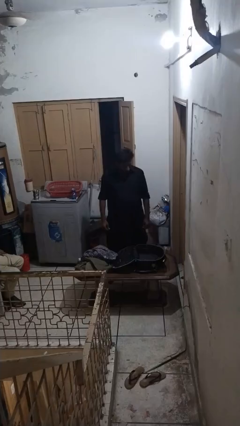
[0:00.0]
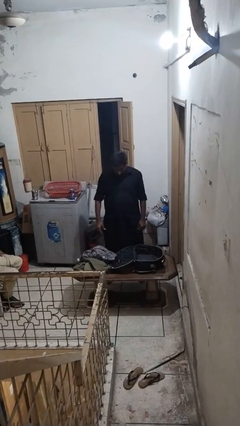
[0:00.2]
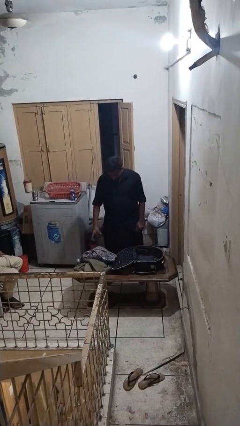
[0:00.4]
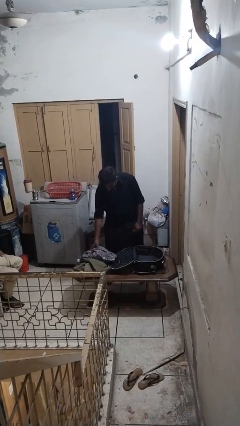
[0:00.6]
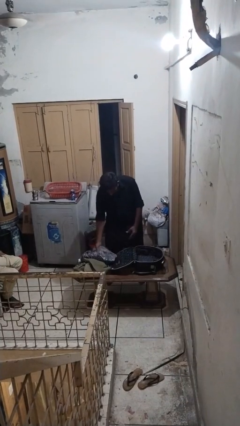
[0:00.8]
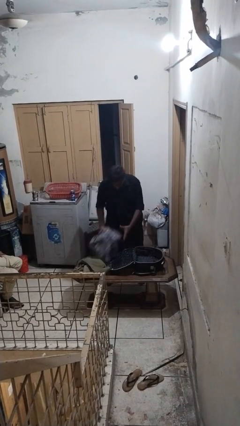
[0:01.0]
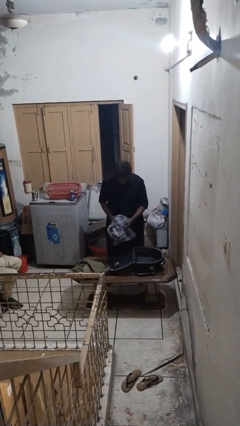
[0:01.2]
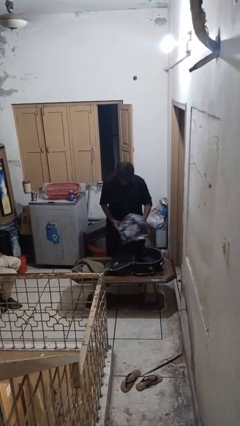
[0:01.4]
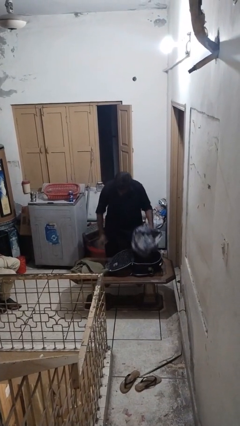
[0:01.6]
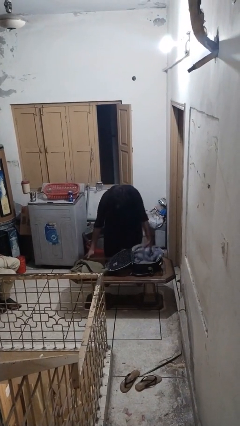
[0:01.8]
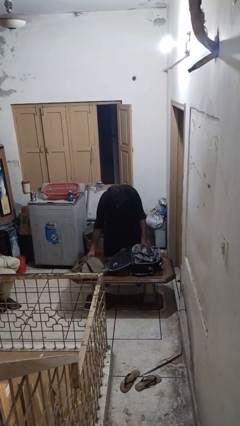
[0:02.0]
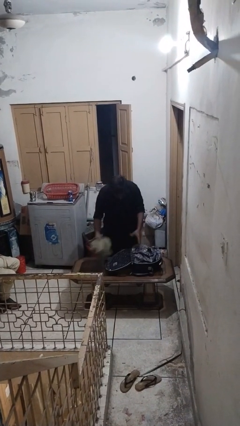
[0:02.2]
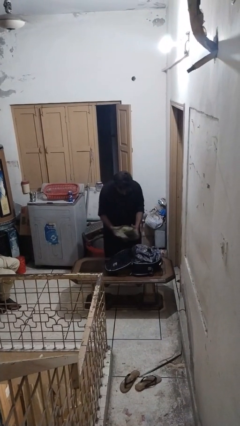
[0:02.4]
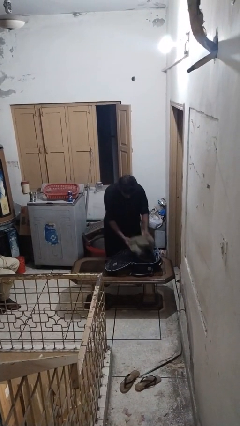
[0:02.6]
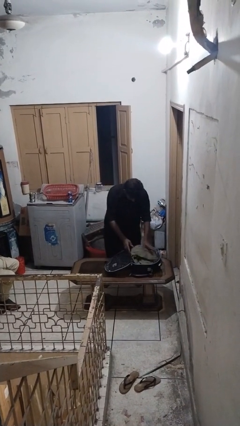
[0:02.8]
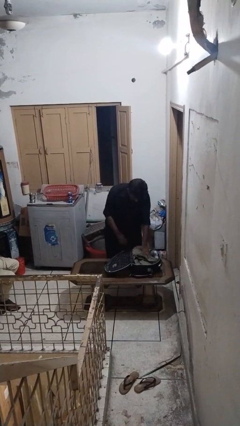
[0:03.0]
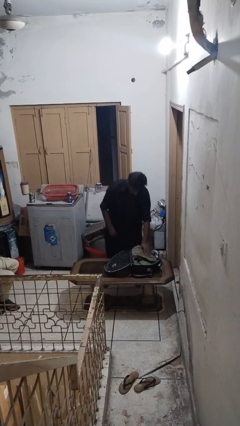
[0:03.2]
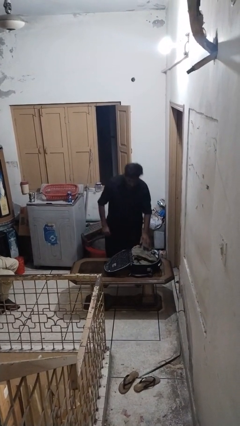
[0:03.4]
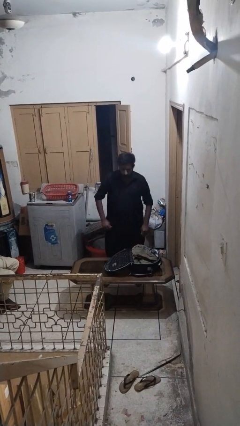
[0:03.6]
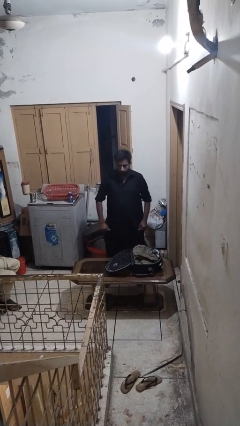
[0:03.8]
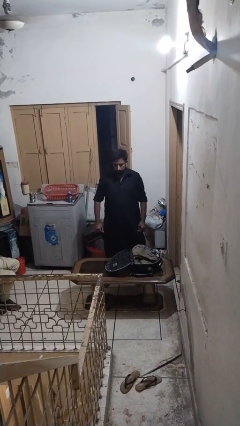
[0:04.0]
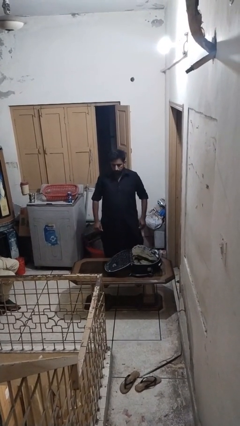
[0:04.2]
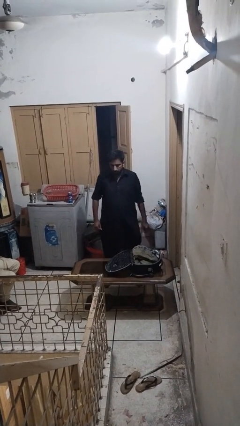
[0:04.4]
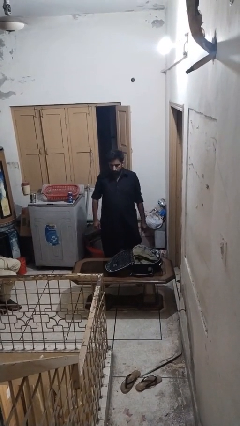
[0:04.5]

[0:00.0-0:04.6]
person loads clothes into suitcase

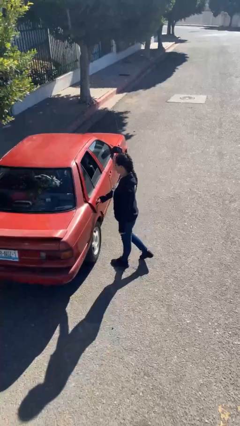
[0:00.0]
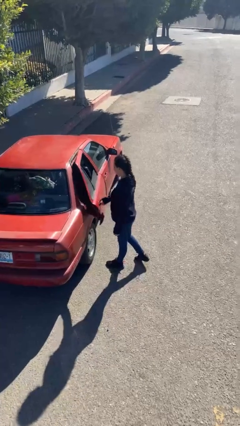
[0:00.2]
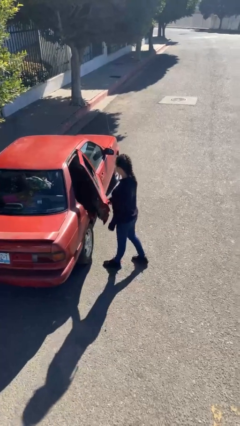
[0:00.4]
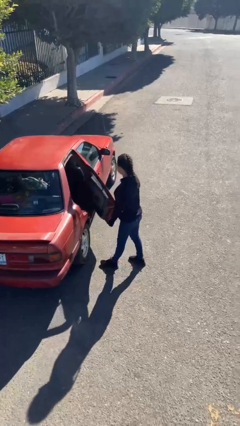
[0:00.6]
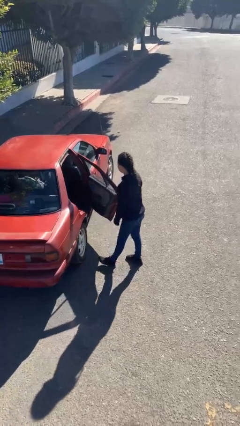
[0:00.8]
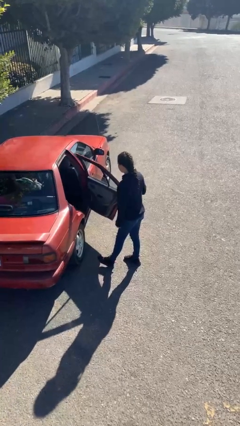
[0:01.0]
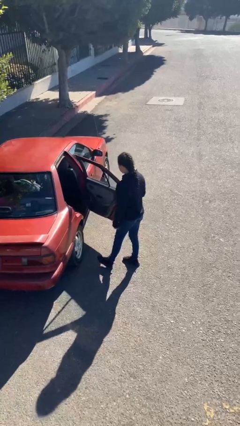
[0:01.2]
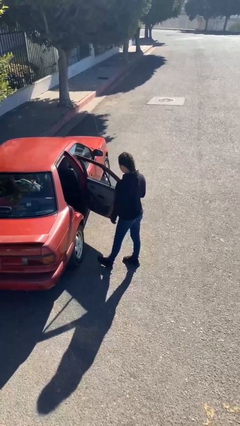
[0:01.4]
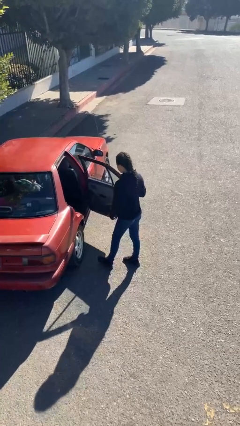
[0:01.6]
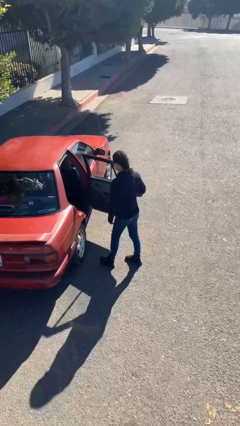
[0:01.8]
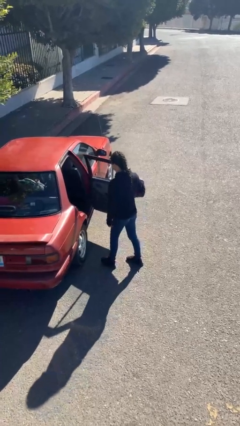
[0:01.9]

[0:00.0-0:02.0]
person opens car door

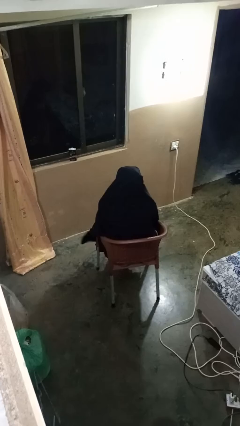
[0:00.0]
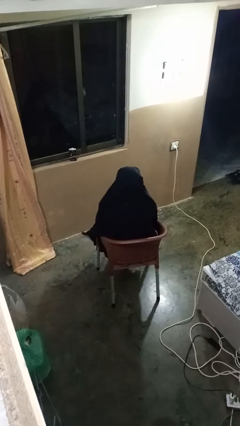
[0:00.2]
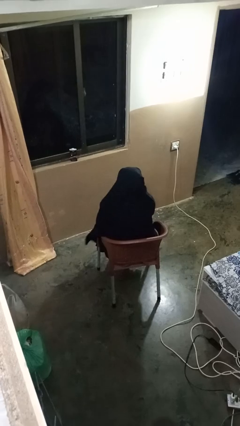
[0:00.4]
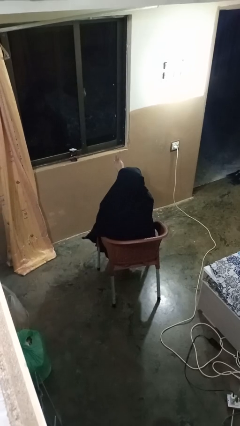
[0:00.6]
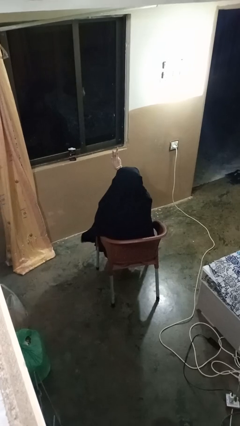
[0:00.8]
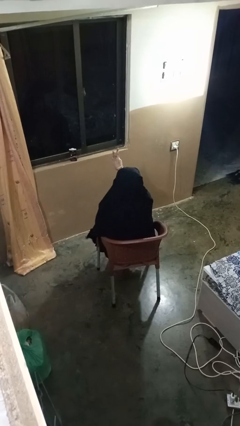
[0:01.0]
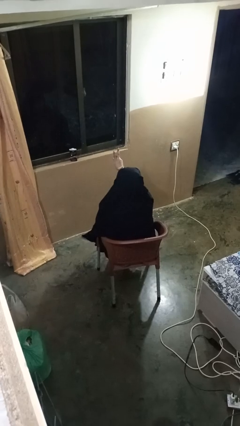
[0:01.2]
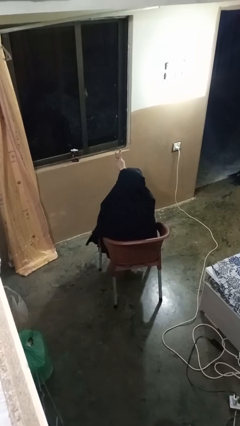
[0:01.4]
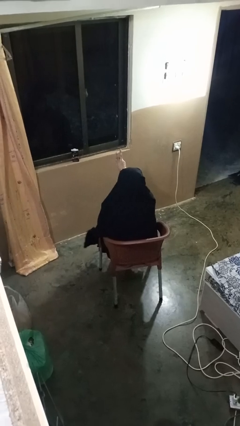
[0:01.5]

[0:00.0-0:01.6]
person gestures peace

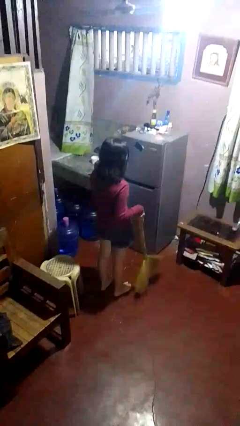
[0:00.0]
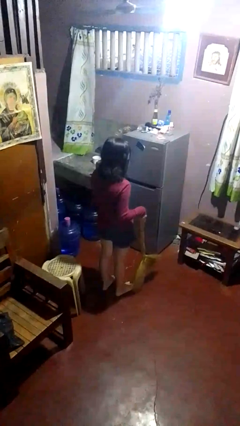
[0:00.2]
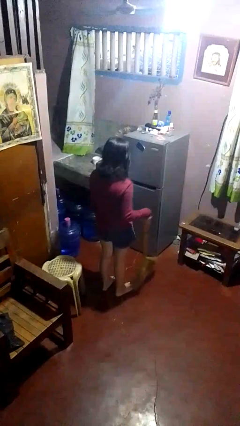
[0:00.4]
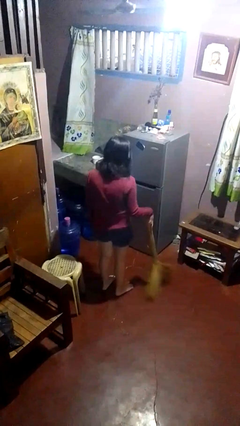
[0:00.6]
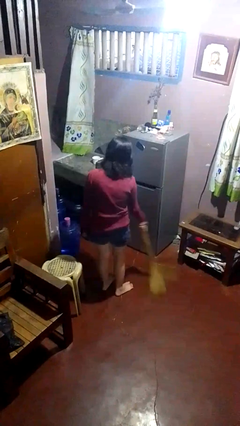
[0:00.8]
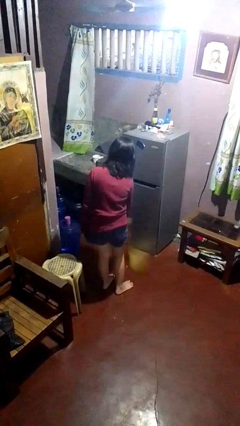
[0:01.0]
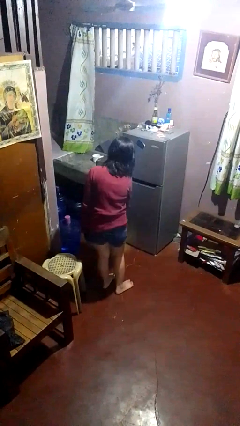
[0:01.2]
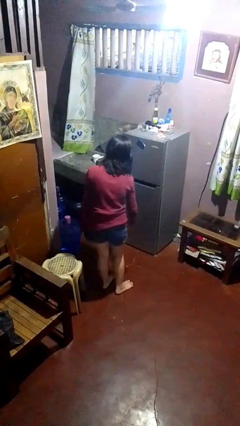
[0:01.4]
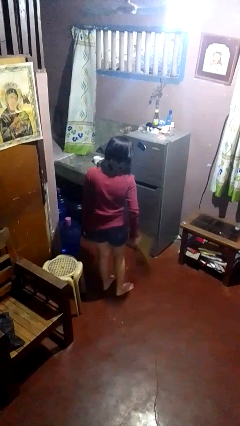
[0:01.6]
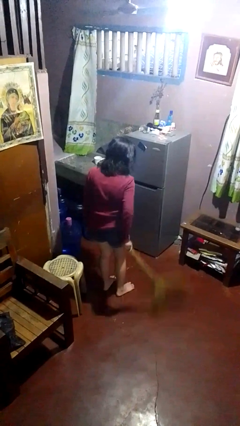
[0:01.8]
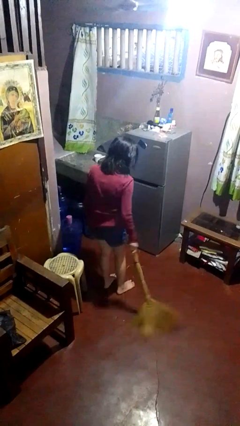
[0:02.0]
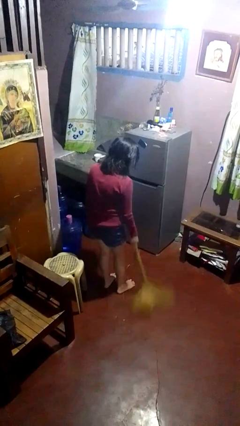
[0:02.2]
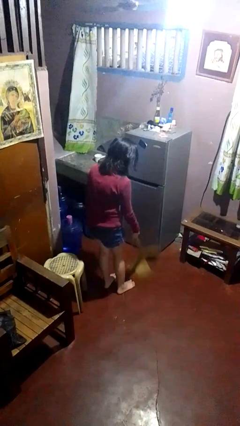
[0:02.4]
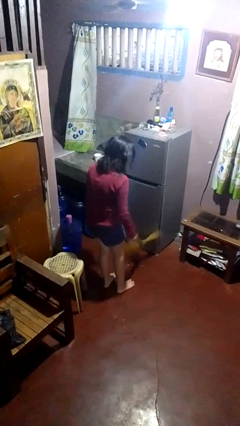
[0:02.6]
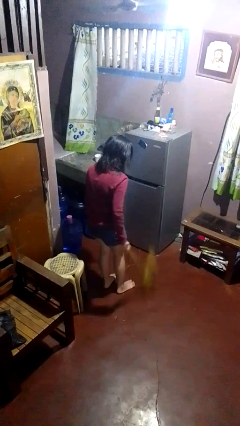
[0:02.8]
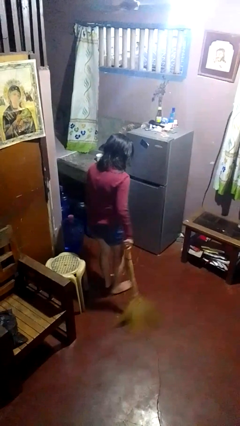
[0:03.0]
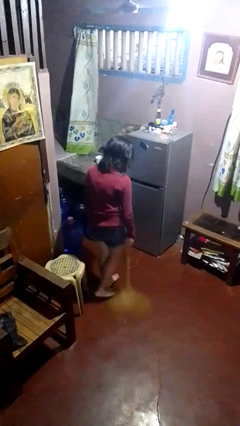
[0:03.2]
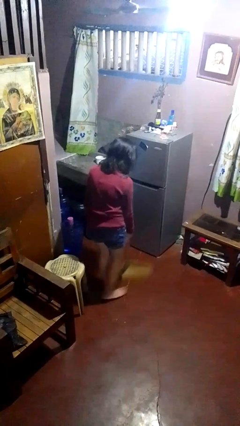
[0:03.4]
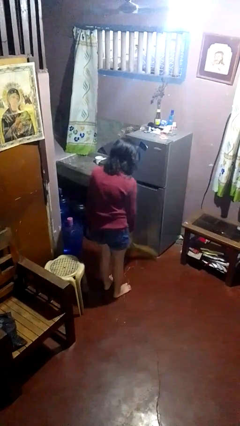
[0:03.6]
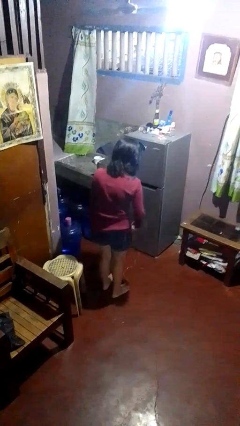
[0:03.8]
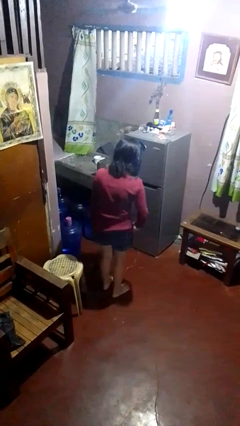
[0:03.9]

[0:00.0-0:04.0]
person sweeps floor

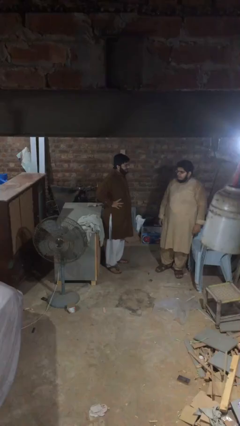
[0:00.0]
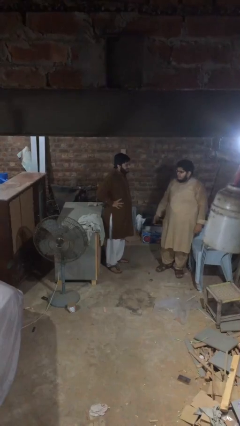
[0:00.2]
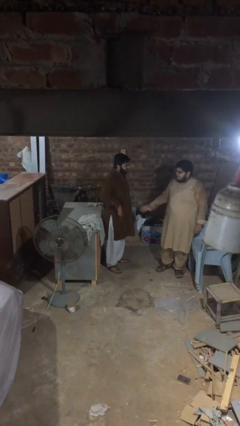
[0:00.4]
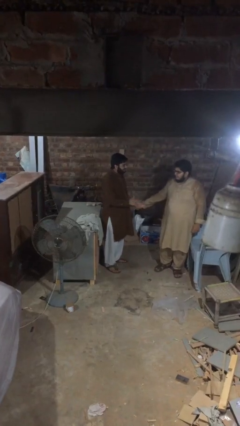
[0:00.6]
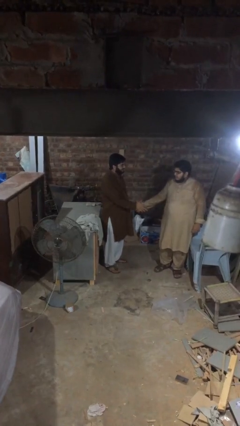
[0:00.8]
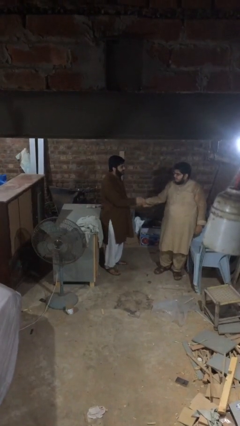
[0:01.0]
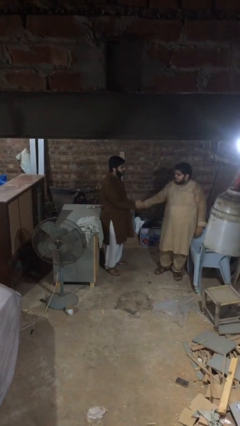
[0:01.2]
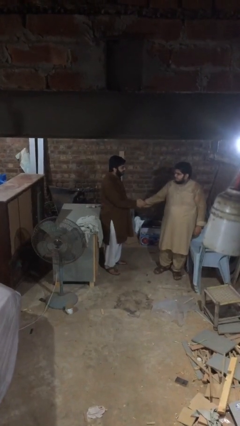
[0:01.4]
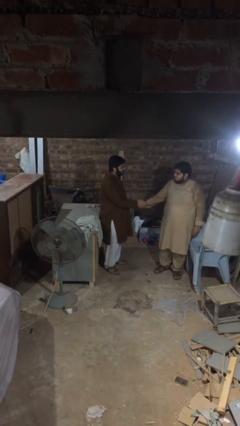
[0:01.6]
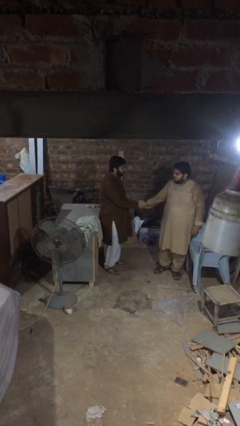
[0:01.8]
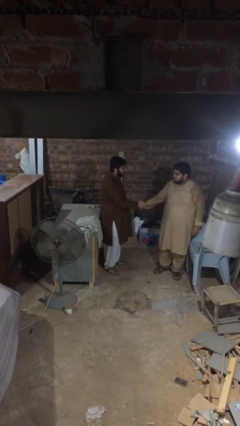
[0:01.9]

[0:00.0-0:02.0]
person shakes hand

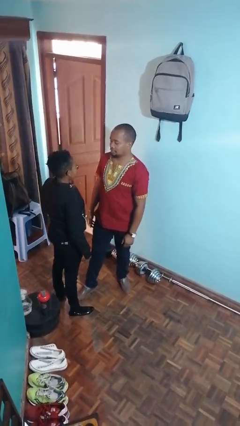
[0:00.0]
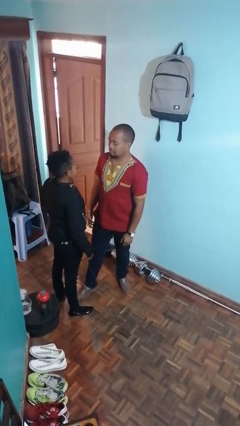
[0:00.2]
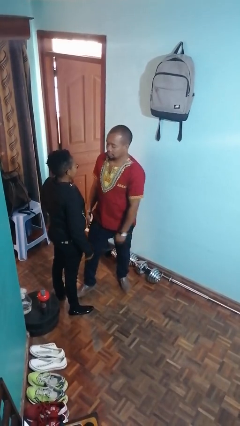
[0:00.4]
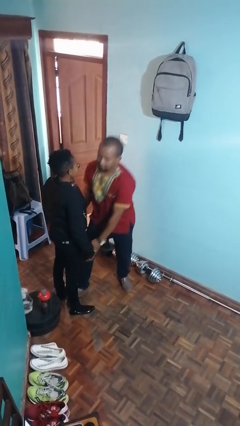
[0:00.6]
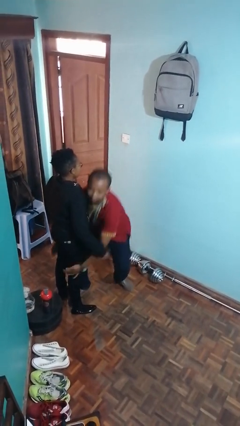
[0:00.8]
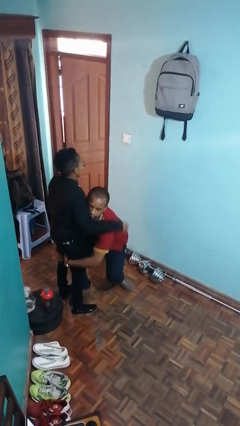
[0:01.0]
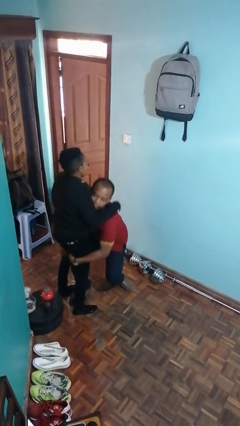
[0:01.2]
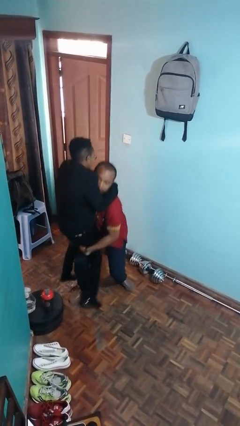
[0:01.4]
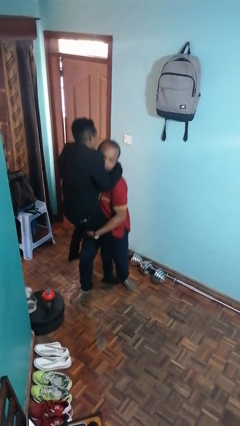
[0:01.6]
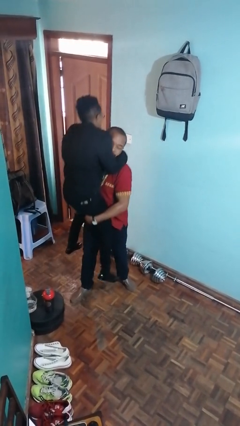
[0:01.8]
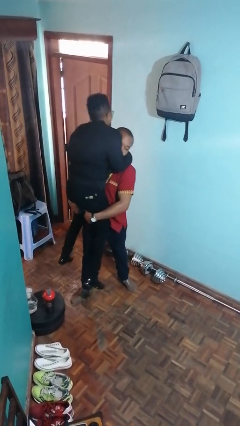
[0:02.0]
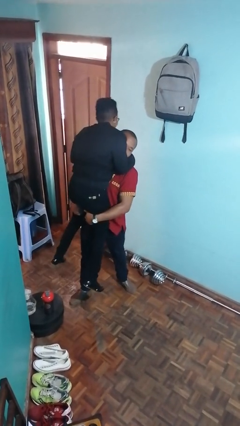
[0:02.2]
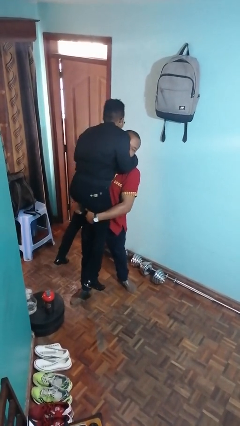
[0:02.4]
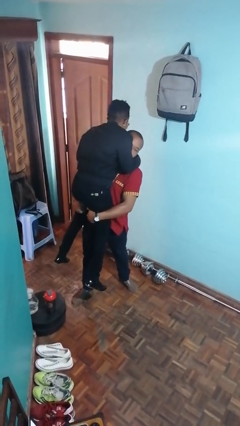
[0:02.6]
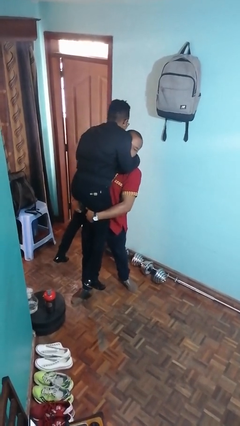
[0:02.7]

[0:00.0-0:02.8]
person picks up person

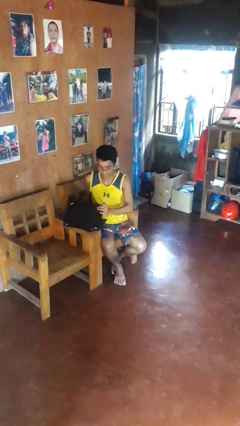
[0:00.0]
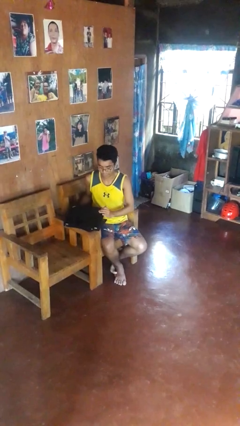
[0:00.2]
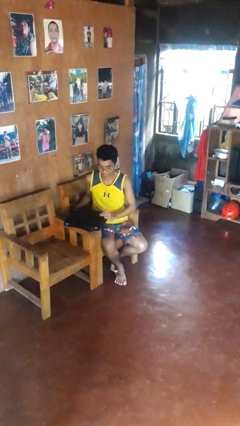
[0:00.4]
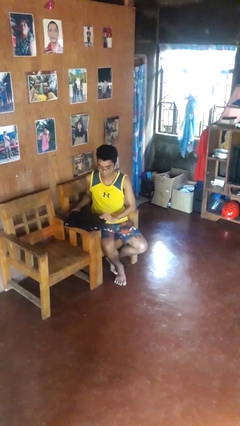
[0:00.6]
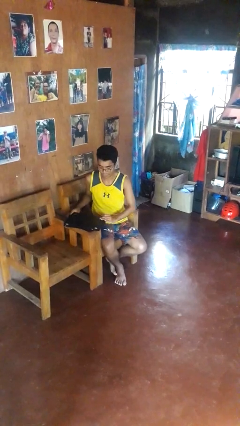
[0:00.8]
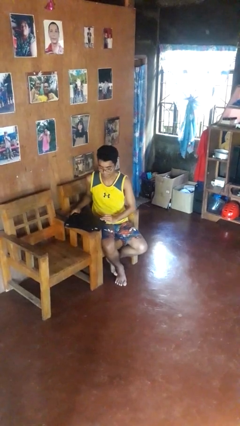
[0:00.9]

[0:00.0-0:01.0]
person closes laptop
